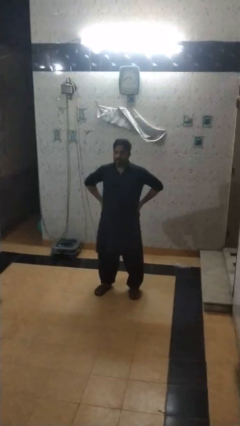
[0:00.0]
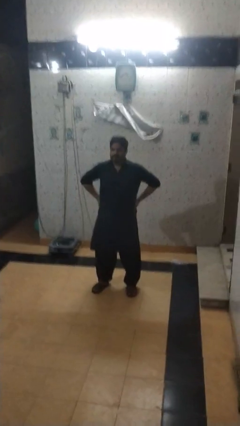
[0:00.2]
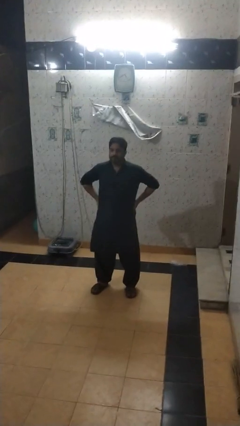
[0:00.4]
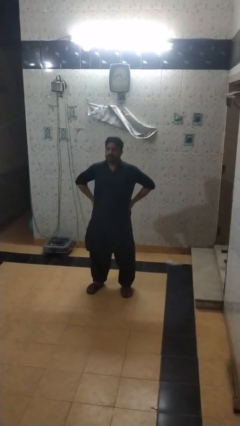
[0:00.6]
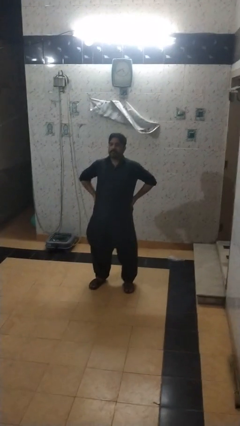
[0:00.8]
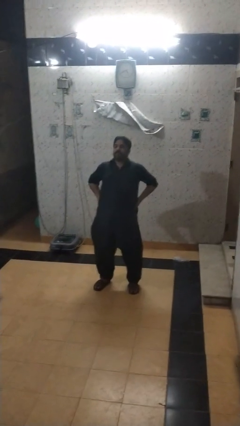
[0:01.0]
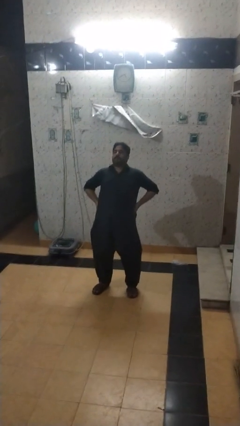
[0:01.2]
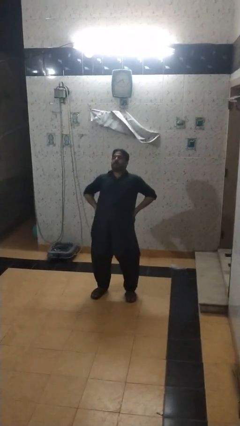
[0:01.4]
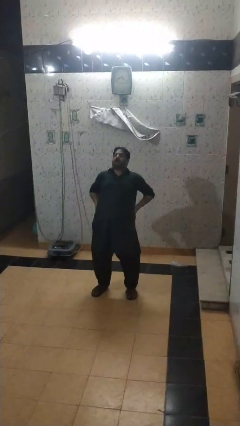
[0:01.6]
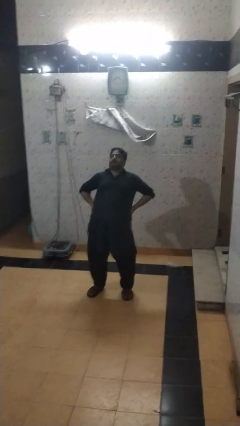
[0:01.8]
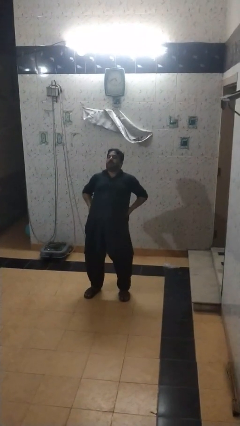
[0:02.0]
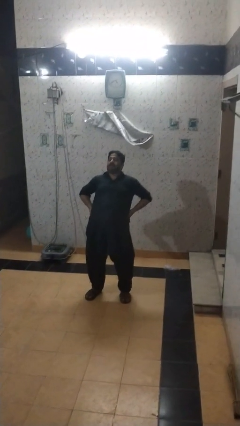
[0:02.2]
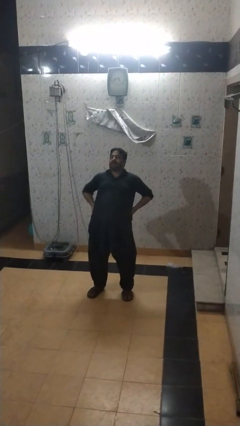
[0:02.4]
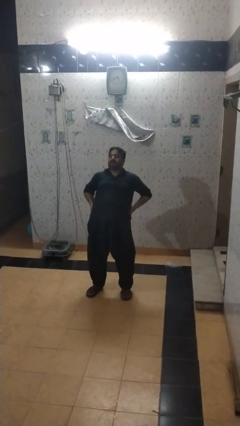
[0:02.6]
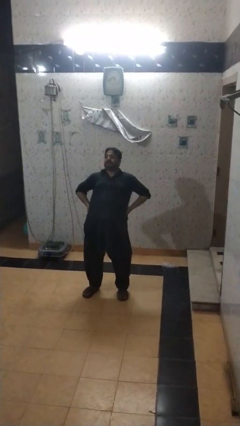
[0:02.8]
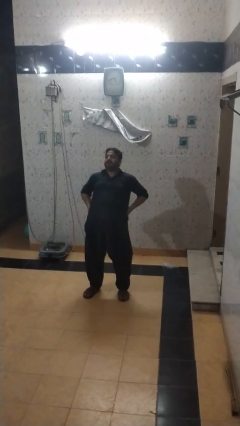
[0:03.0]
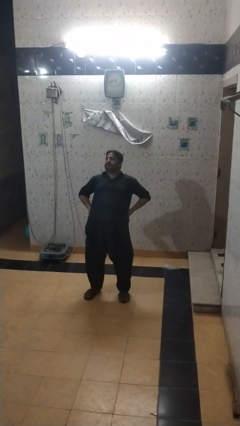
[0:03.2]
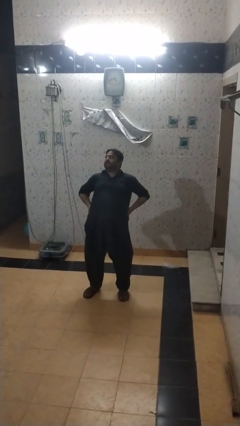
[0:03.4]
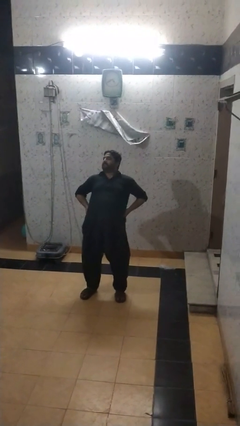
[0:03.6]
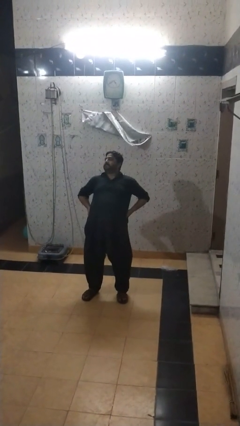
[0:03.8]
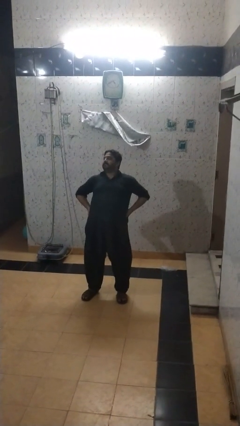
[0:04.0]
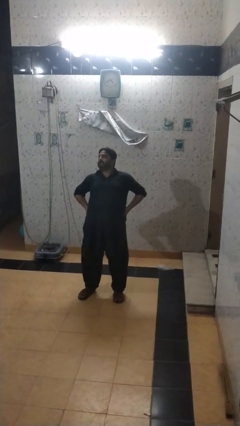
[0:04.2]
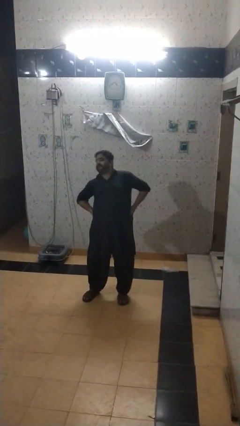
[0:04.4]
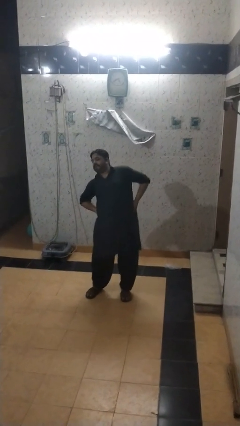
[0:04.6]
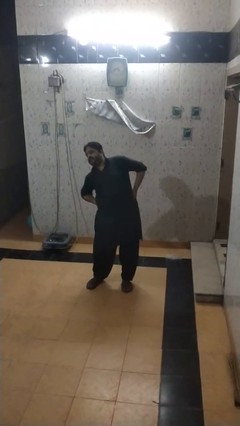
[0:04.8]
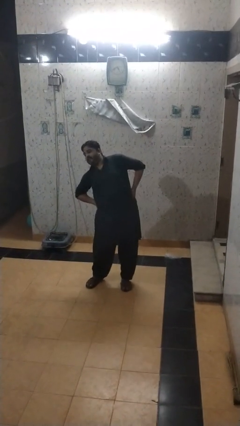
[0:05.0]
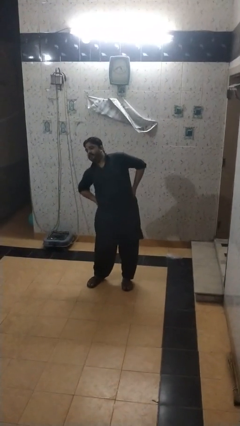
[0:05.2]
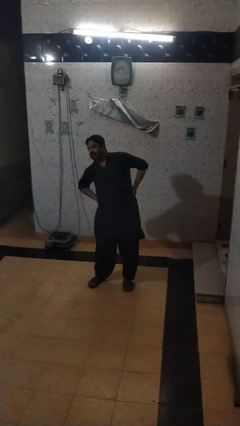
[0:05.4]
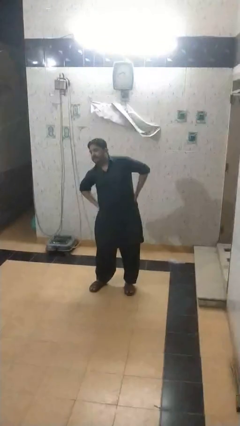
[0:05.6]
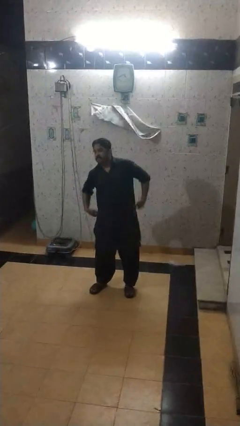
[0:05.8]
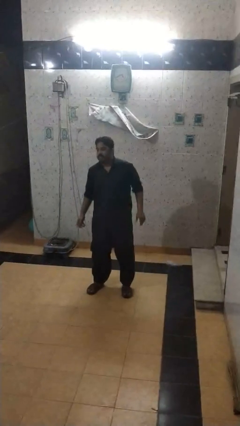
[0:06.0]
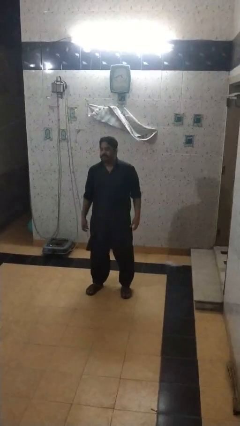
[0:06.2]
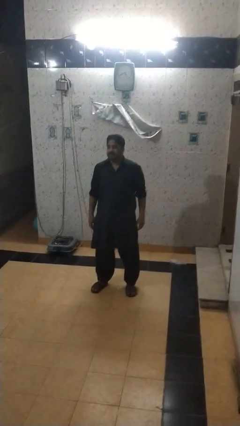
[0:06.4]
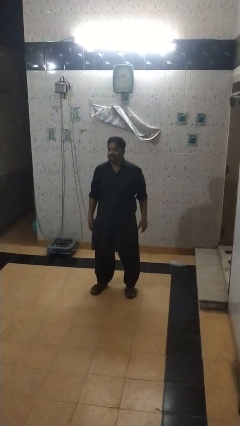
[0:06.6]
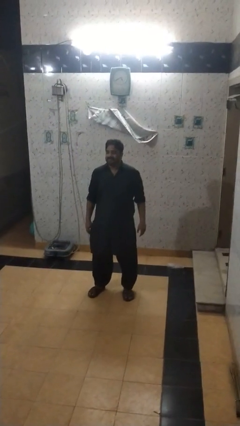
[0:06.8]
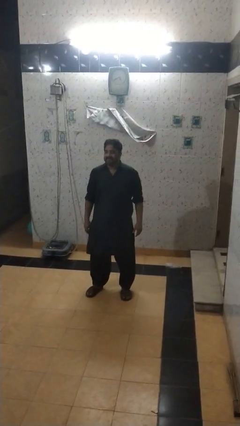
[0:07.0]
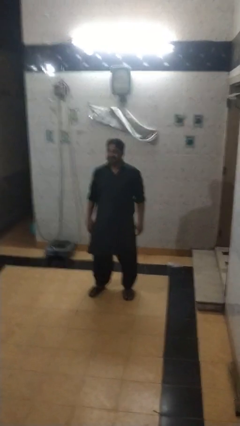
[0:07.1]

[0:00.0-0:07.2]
person stretches back

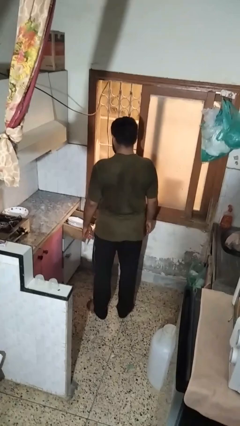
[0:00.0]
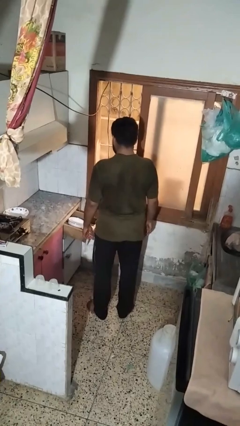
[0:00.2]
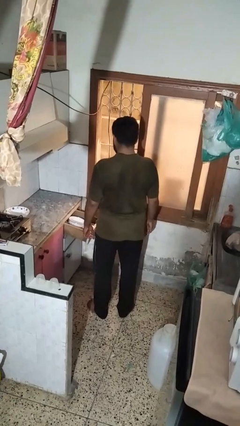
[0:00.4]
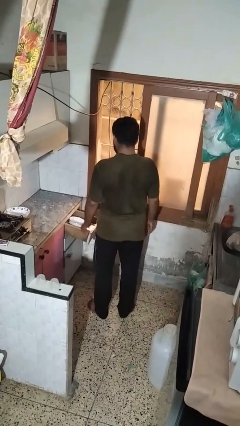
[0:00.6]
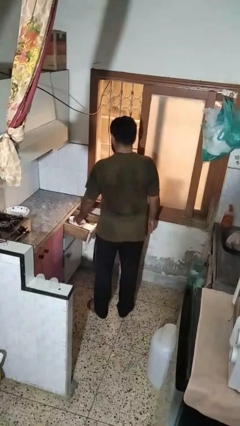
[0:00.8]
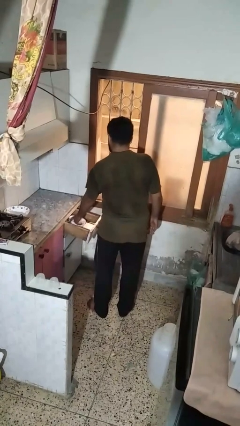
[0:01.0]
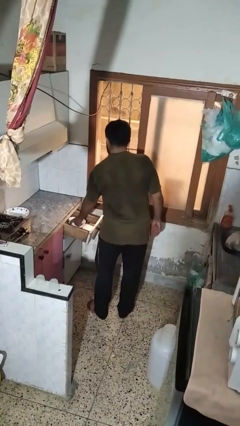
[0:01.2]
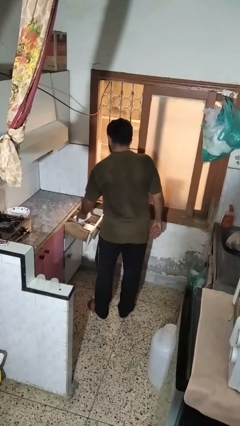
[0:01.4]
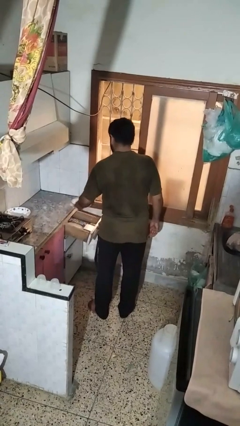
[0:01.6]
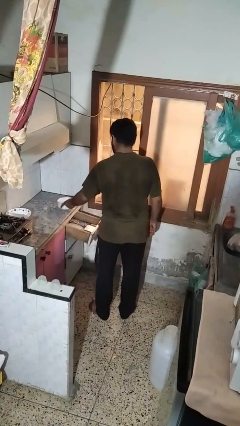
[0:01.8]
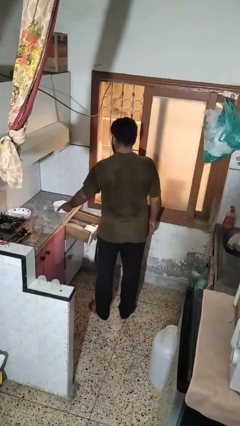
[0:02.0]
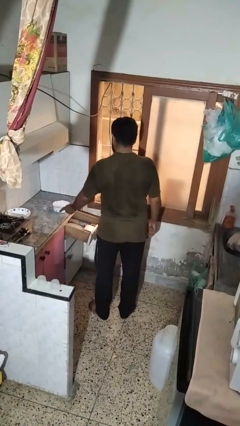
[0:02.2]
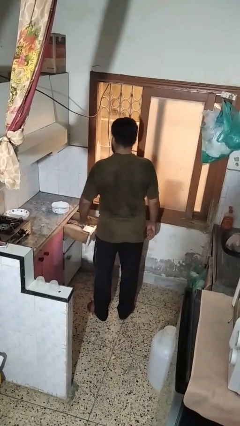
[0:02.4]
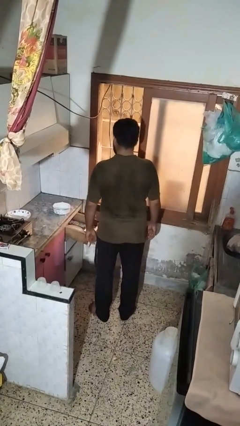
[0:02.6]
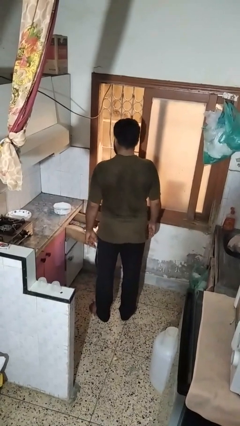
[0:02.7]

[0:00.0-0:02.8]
person takes object from kitchen drawer

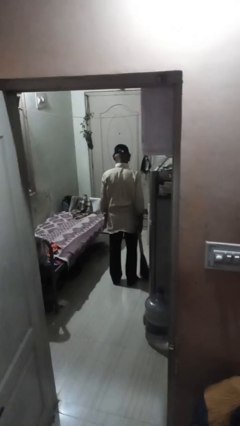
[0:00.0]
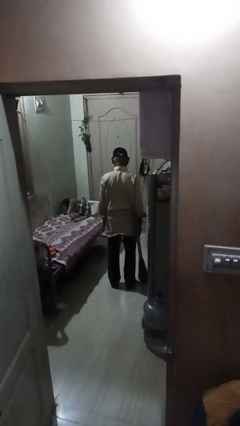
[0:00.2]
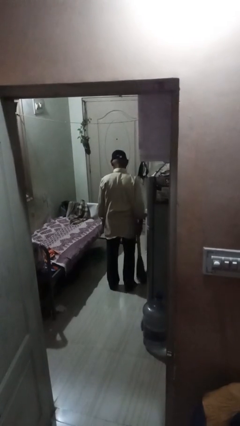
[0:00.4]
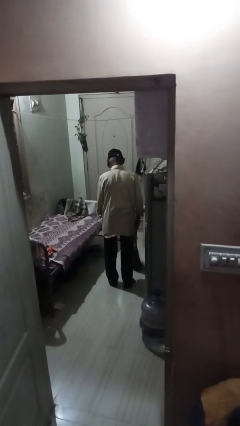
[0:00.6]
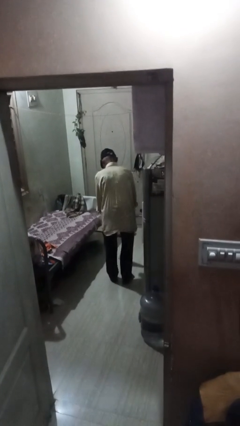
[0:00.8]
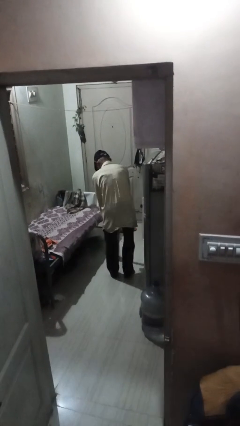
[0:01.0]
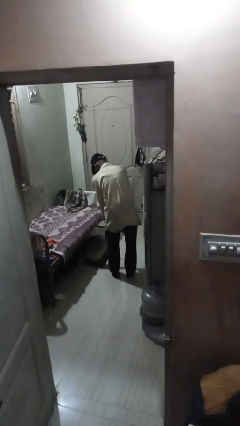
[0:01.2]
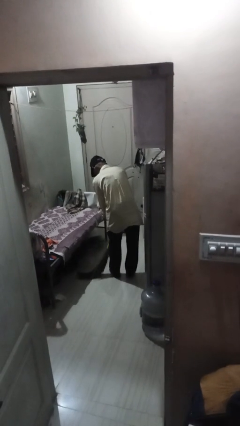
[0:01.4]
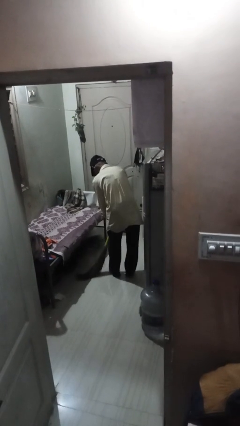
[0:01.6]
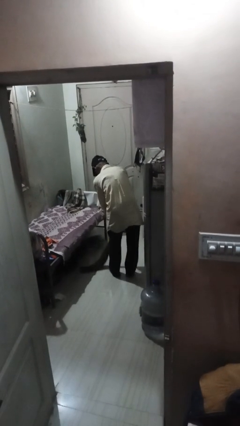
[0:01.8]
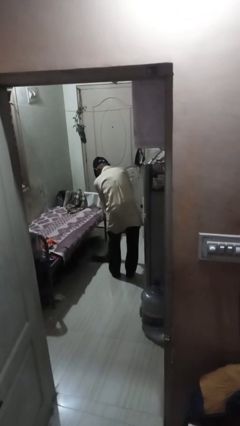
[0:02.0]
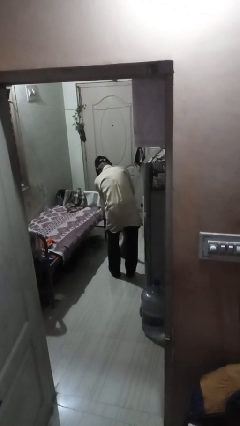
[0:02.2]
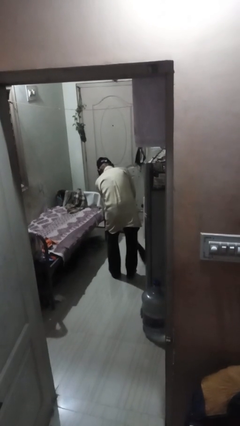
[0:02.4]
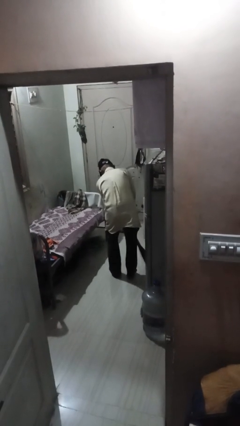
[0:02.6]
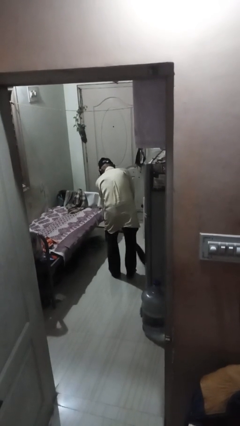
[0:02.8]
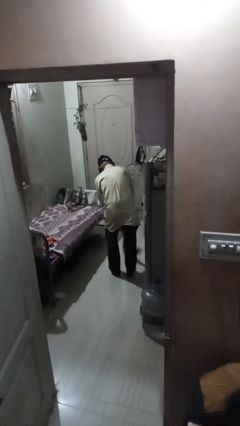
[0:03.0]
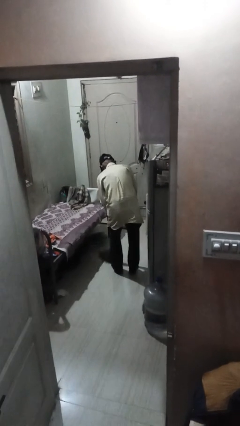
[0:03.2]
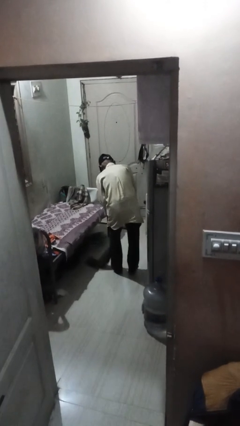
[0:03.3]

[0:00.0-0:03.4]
person sweeps floor

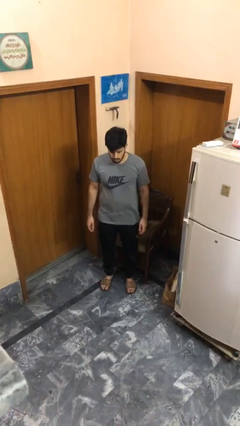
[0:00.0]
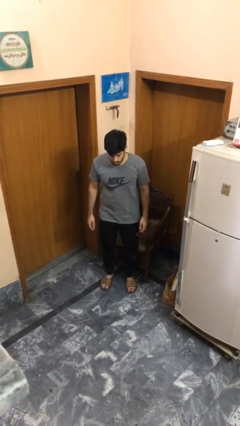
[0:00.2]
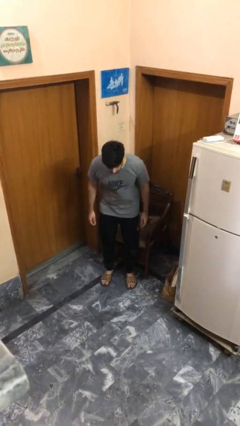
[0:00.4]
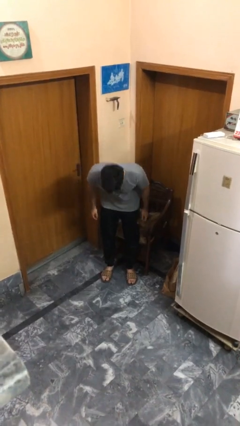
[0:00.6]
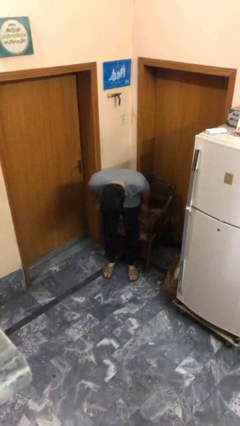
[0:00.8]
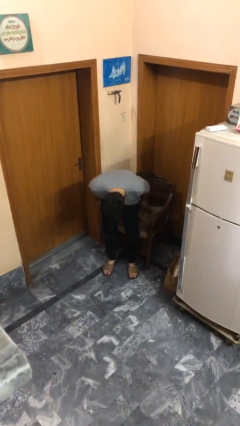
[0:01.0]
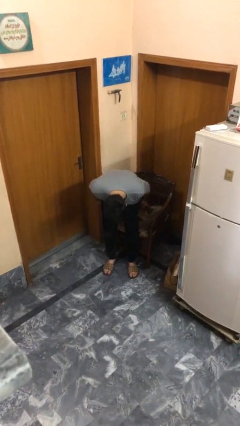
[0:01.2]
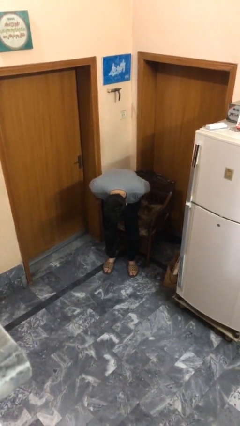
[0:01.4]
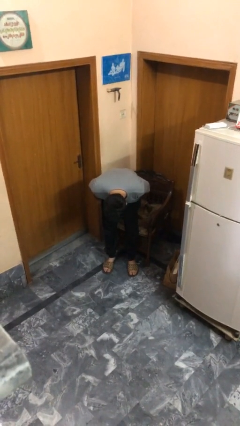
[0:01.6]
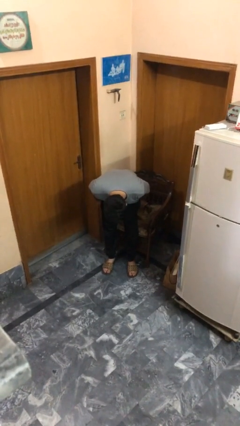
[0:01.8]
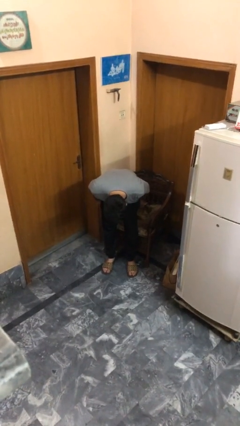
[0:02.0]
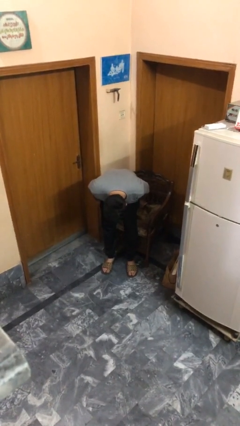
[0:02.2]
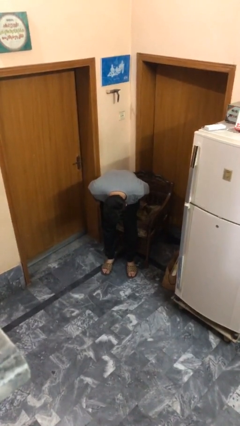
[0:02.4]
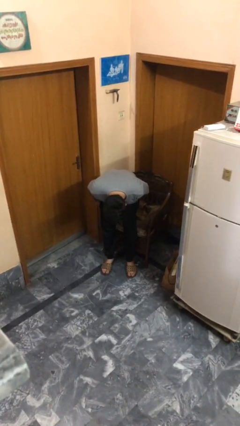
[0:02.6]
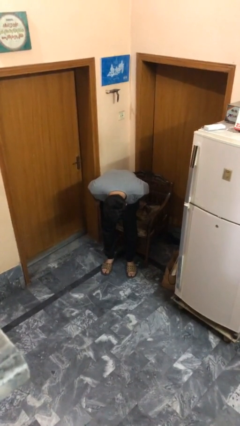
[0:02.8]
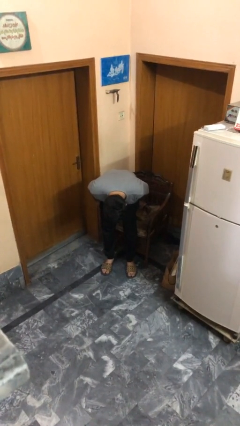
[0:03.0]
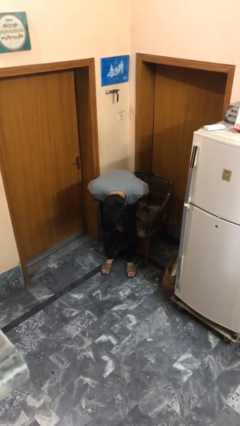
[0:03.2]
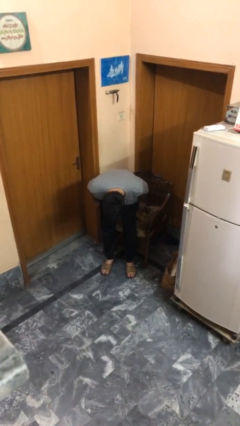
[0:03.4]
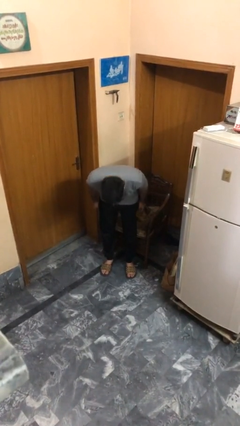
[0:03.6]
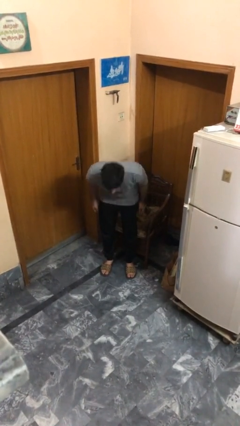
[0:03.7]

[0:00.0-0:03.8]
person bows

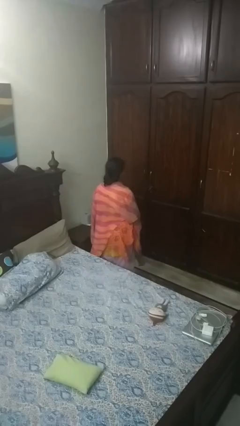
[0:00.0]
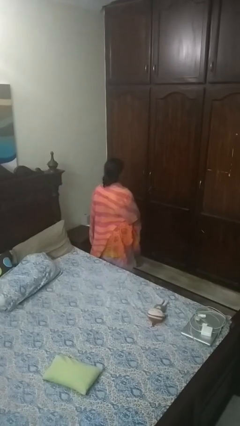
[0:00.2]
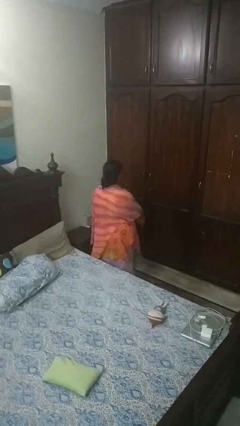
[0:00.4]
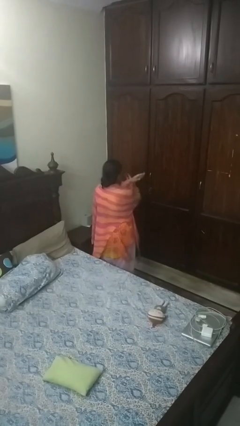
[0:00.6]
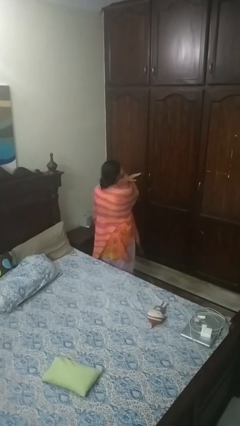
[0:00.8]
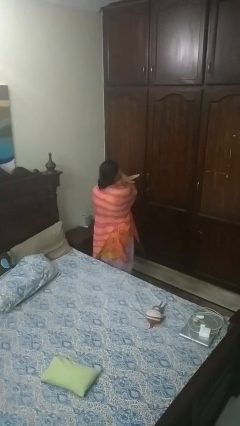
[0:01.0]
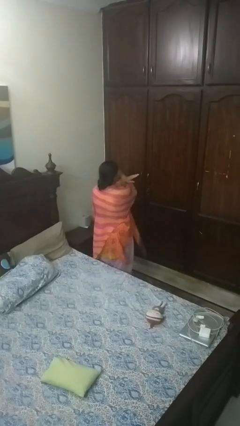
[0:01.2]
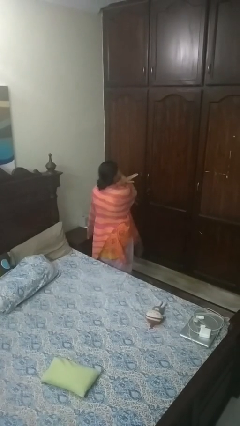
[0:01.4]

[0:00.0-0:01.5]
person gestures arms x
